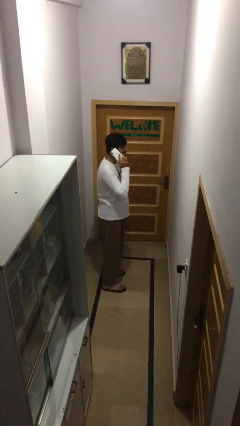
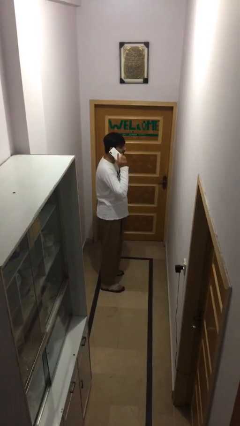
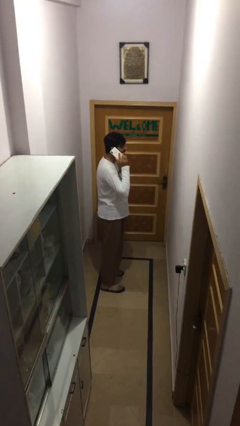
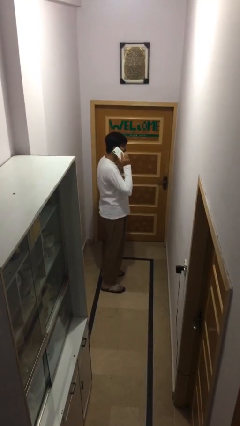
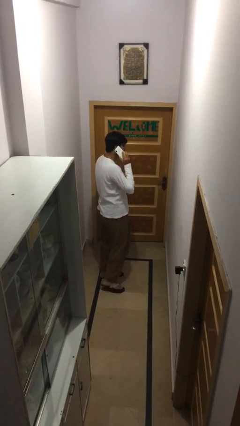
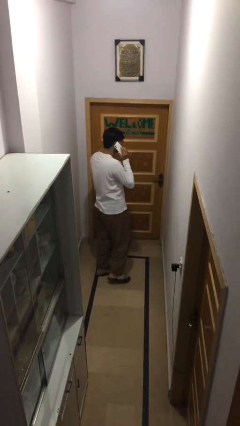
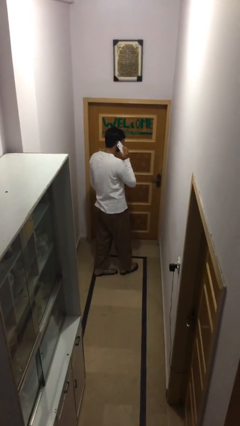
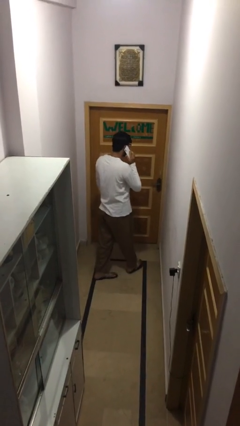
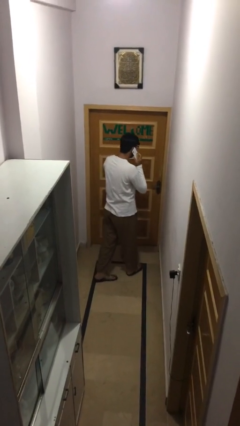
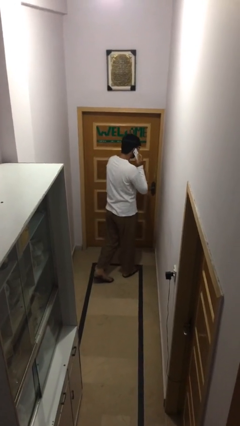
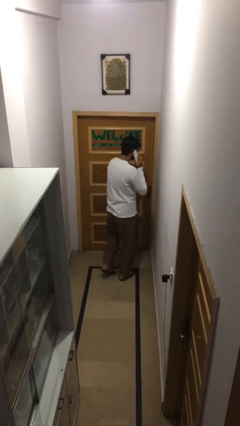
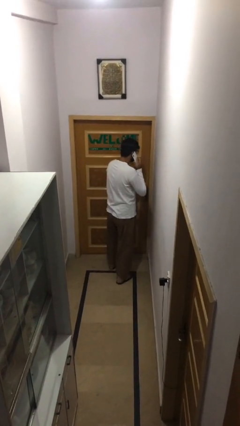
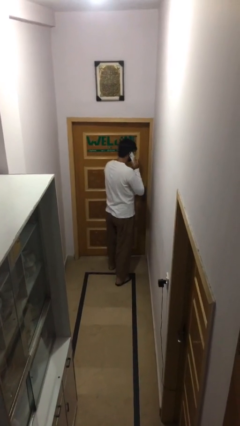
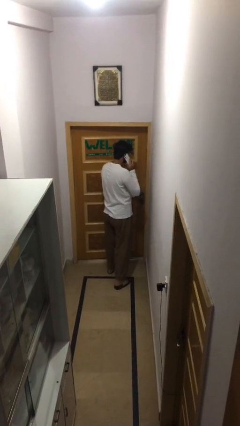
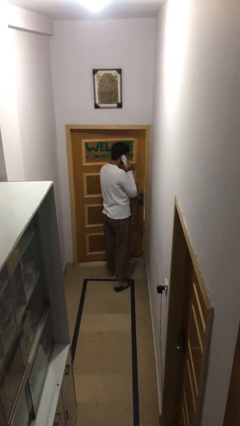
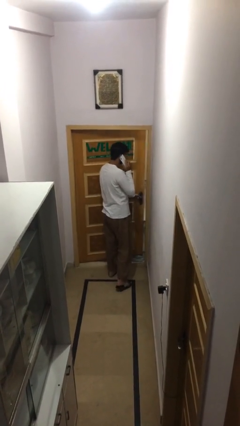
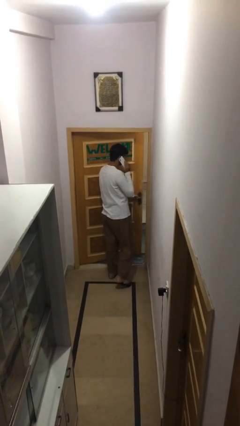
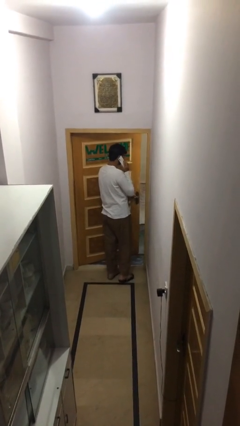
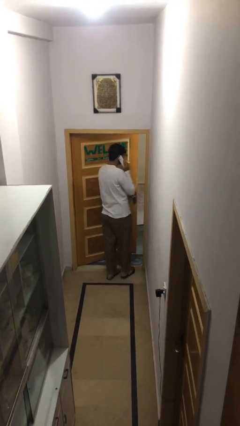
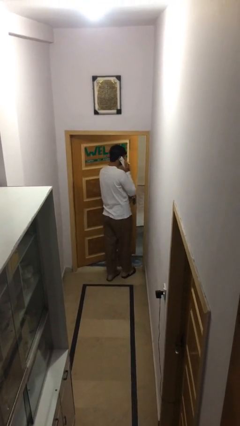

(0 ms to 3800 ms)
person opens facility door

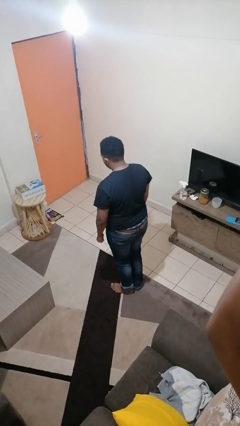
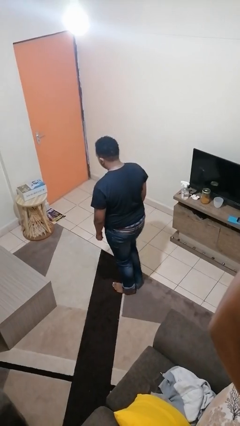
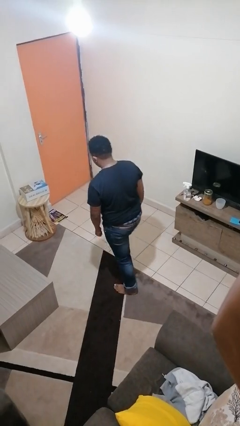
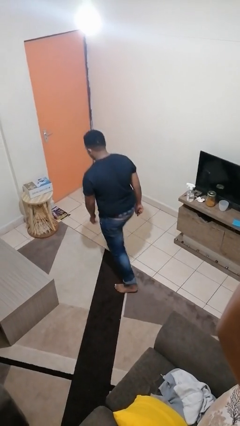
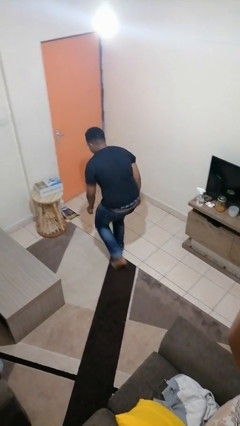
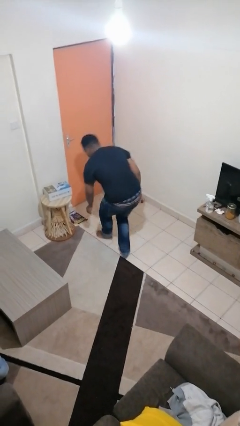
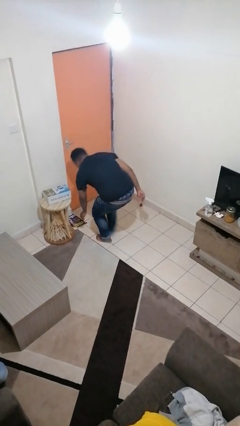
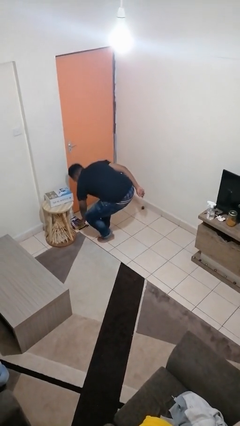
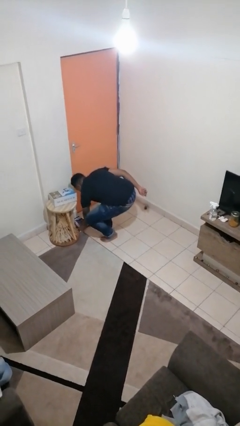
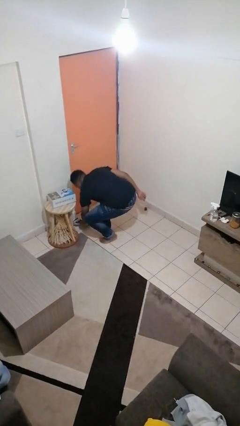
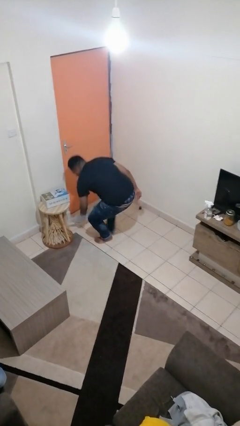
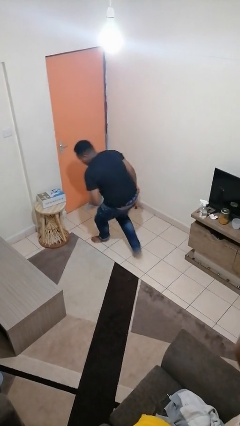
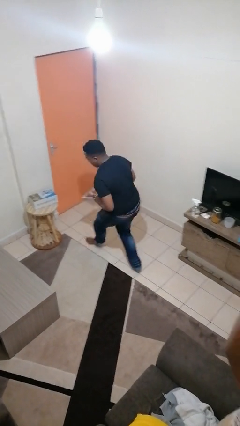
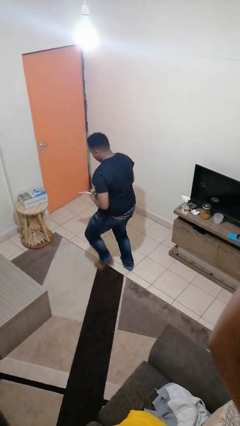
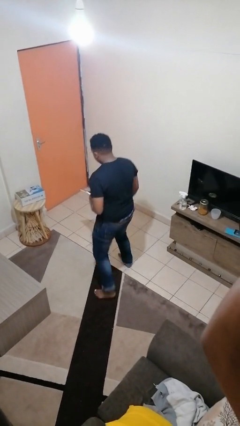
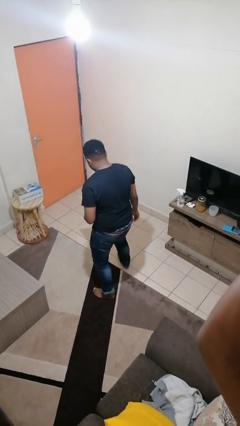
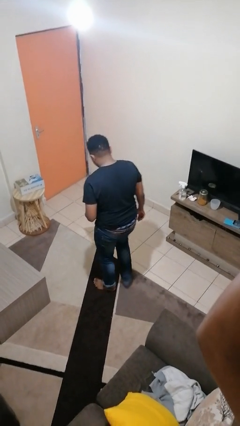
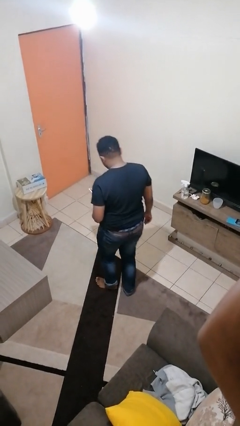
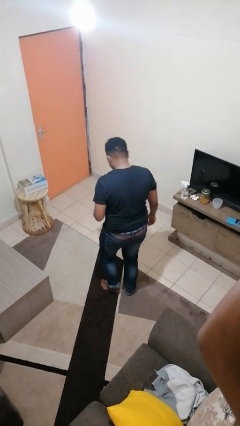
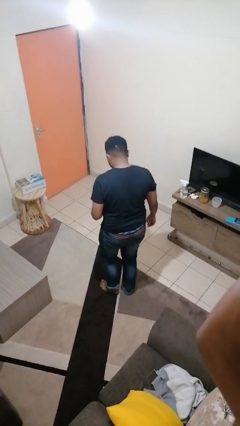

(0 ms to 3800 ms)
person picks up object from floor

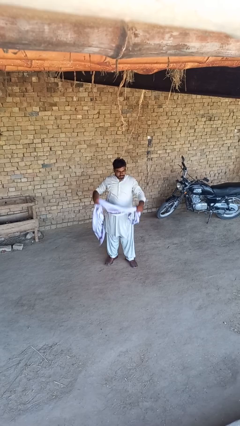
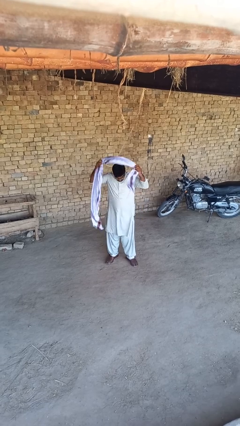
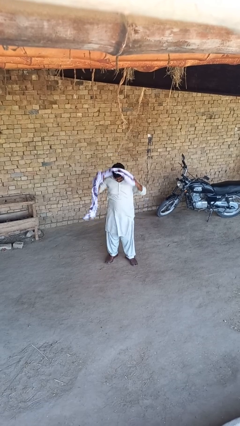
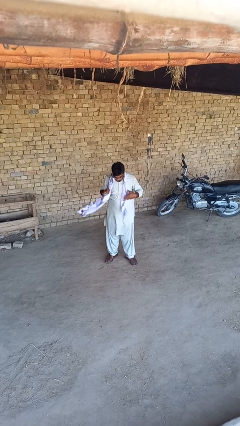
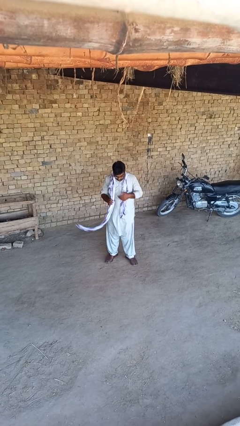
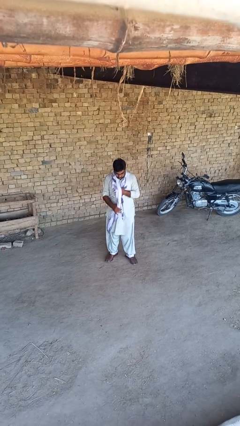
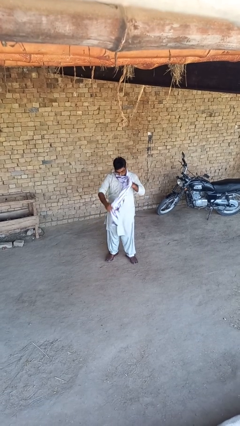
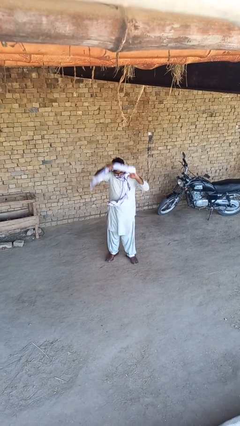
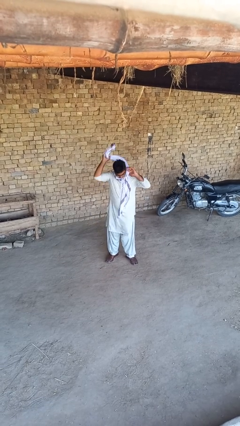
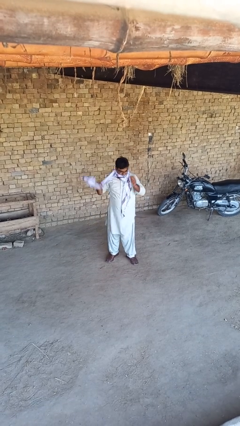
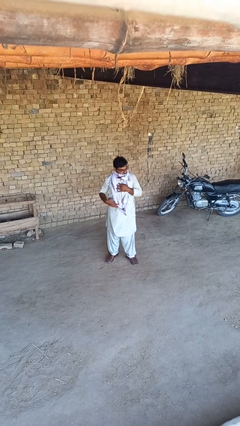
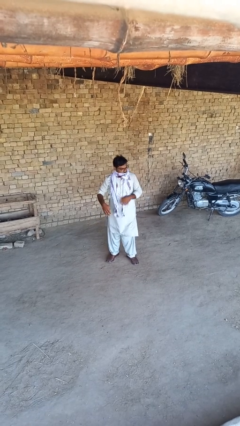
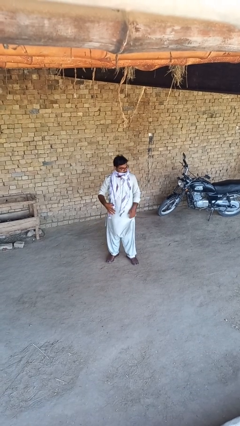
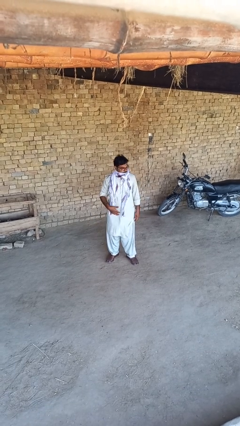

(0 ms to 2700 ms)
person puts on scarf

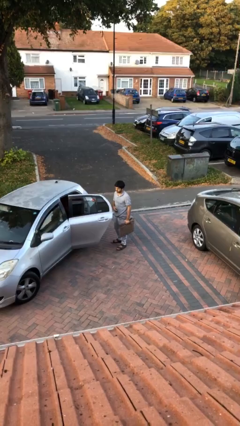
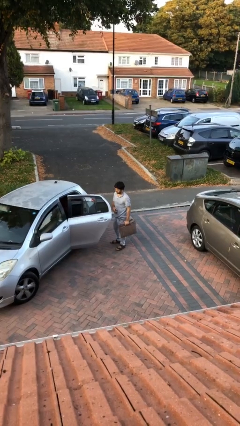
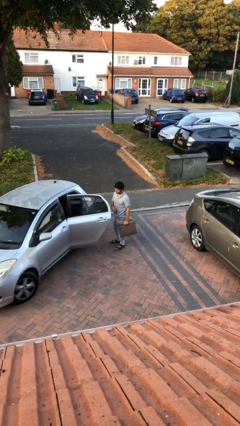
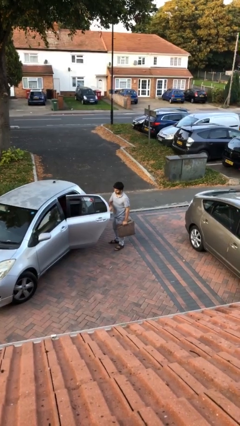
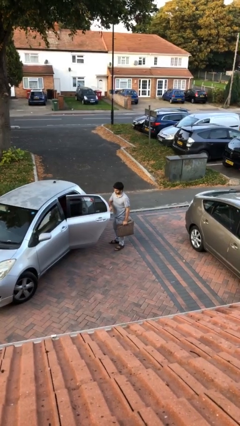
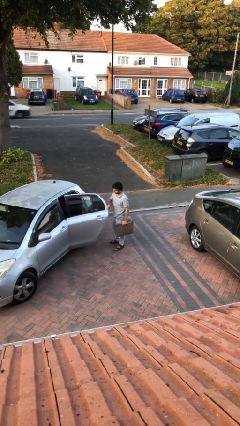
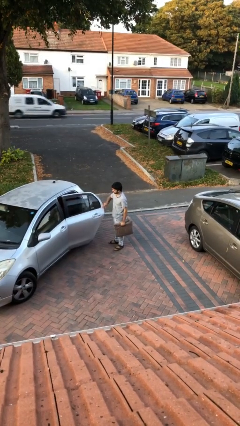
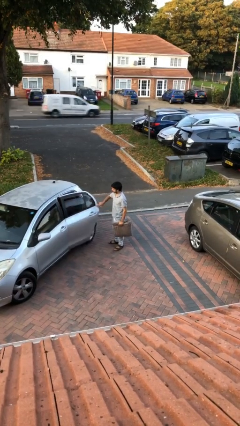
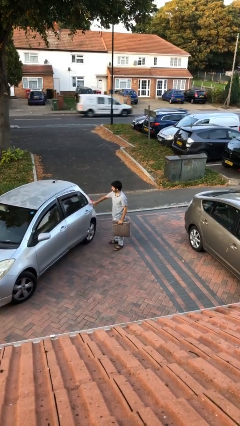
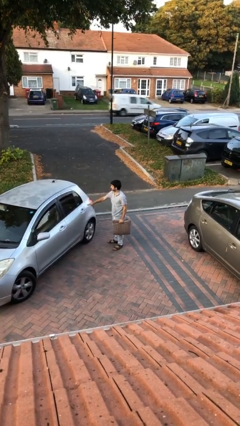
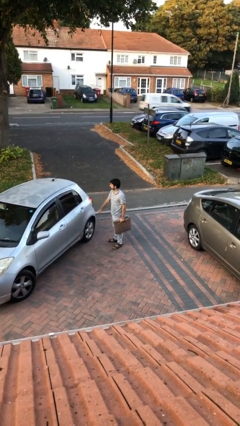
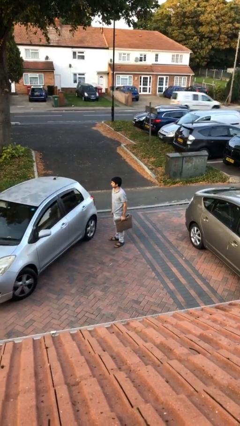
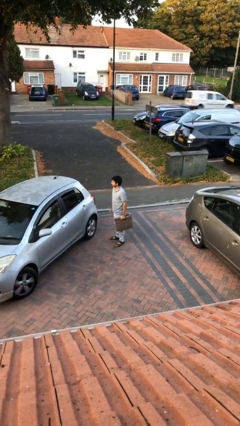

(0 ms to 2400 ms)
person closes car door

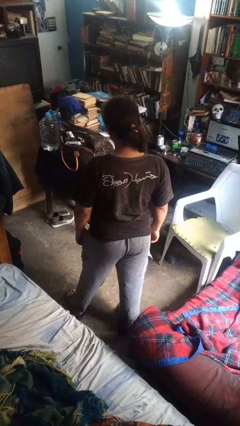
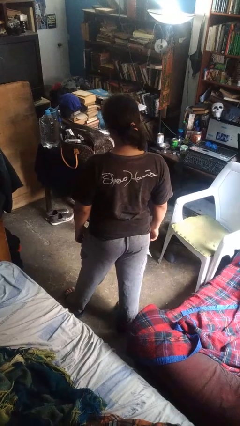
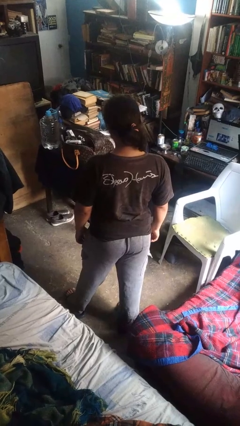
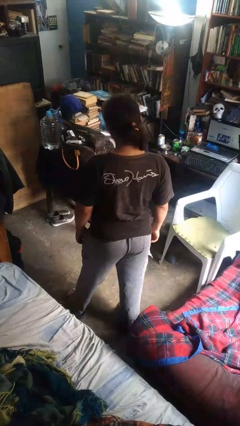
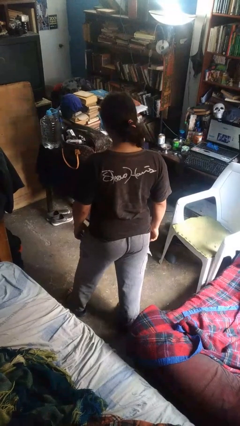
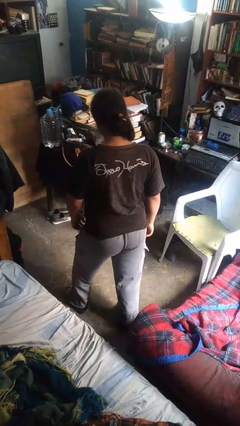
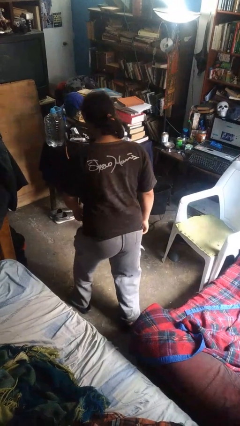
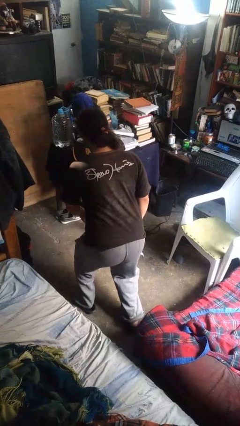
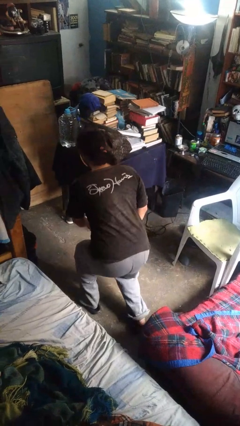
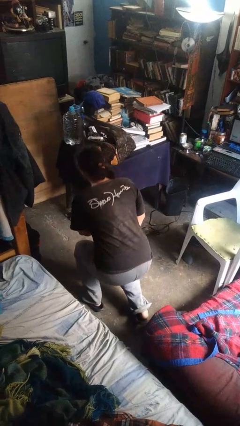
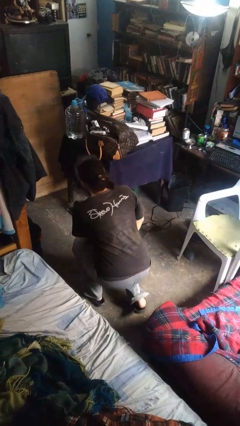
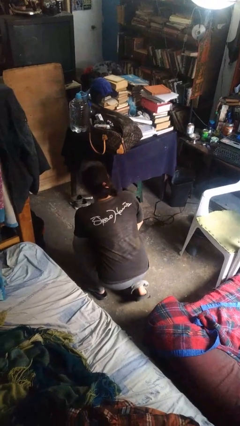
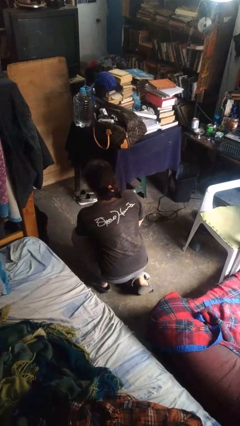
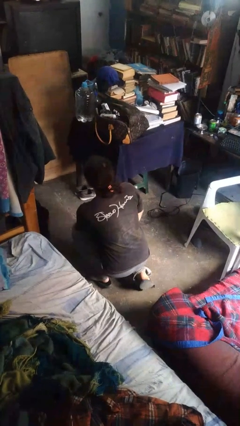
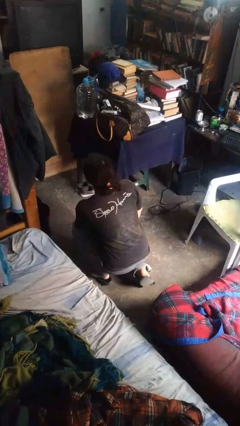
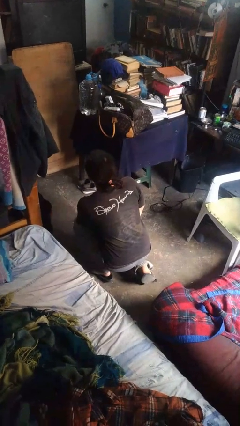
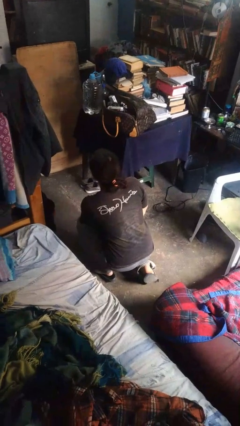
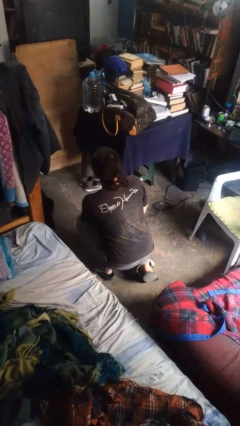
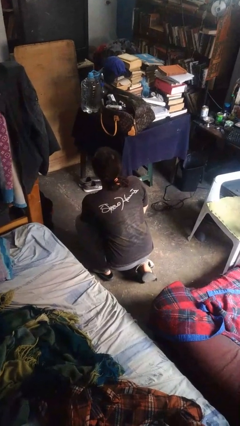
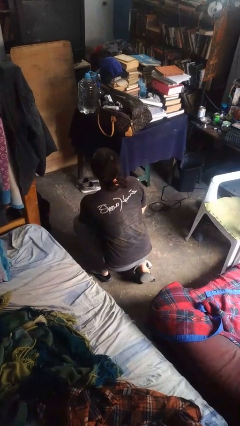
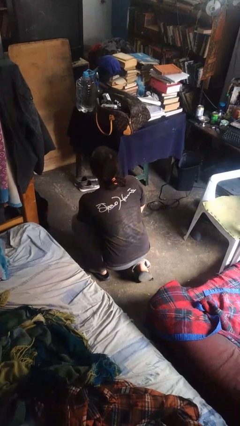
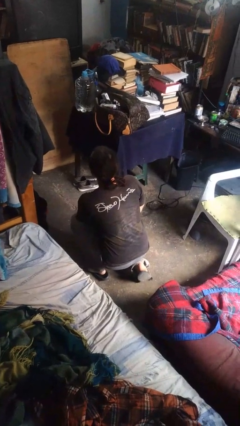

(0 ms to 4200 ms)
person kneels

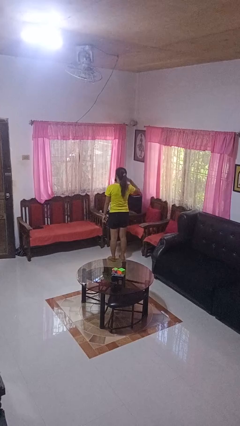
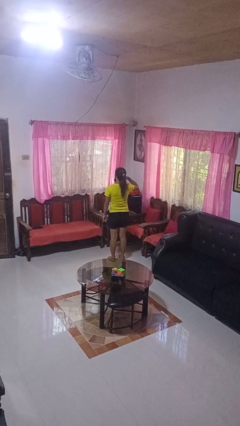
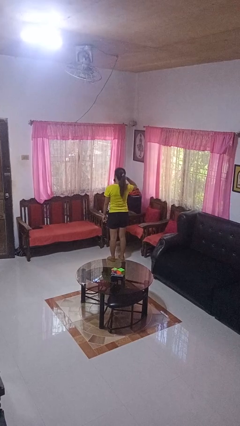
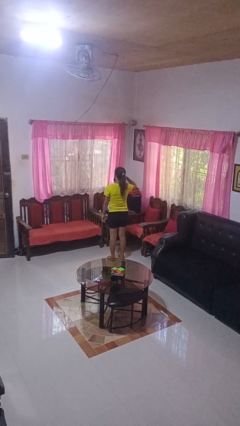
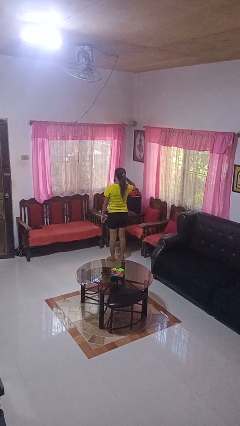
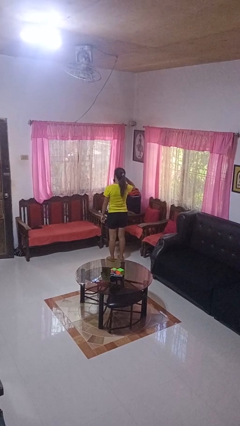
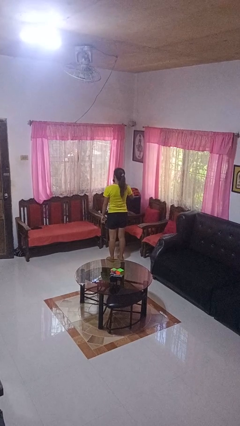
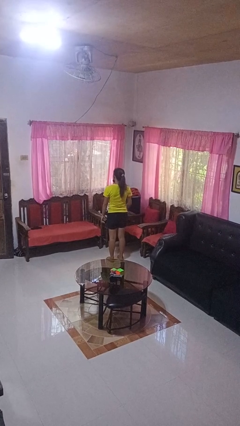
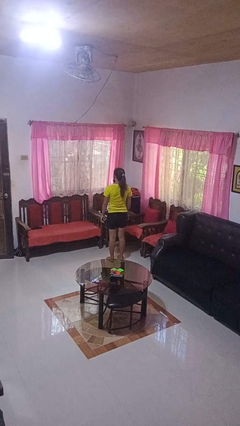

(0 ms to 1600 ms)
person gestures call me
